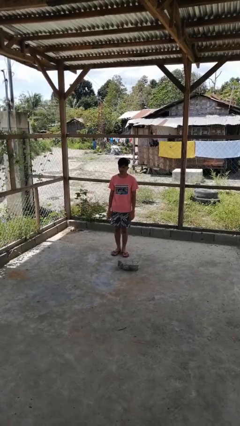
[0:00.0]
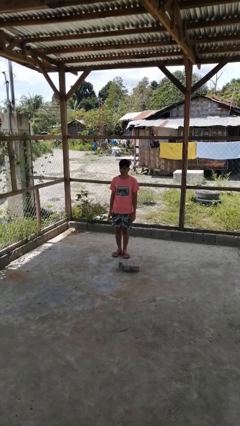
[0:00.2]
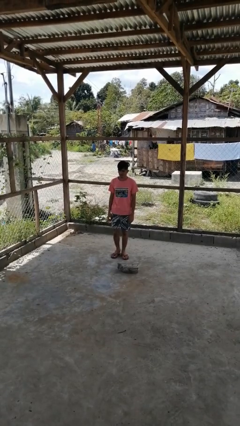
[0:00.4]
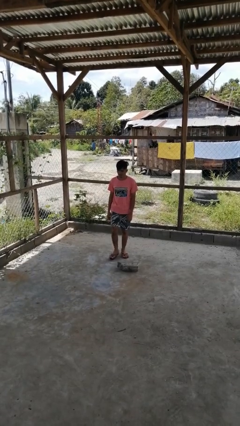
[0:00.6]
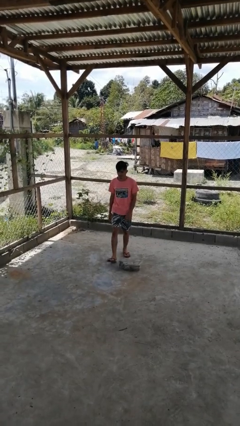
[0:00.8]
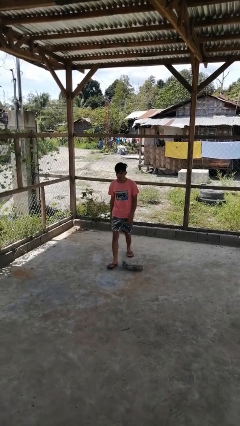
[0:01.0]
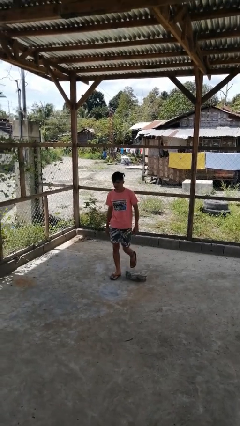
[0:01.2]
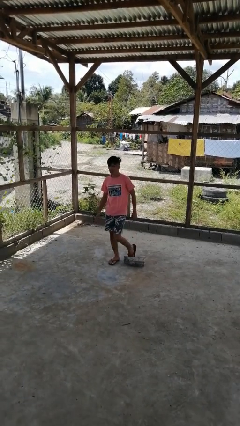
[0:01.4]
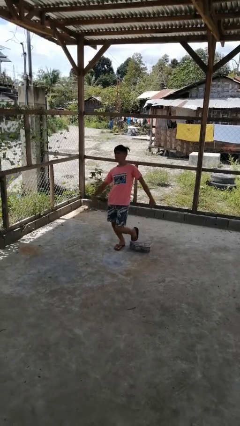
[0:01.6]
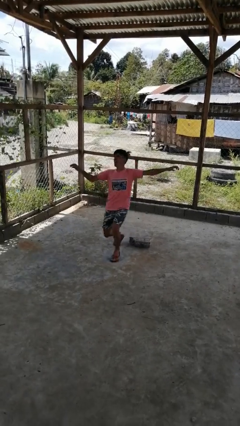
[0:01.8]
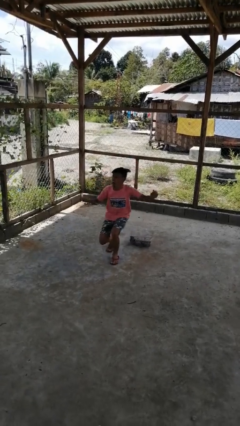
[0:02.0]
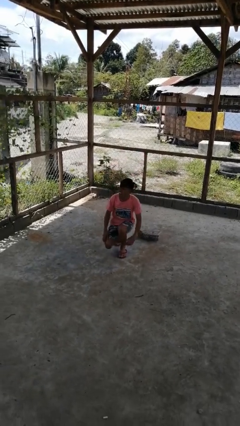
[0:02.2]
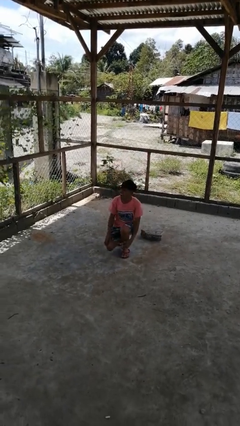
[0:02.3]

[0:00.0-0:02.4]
person trips on object on floor

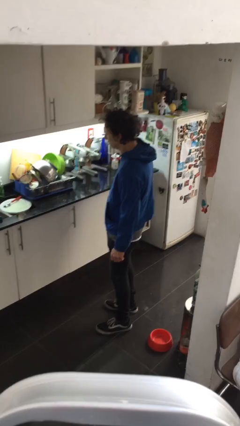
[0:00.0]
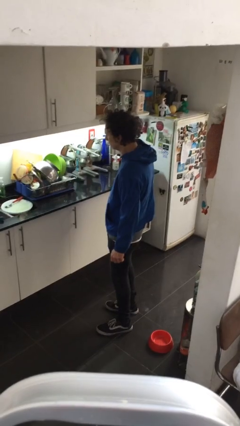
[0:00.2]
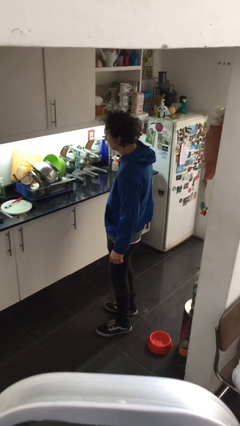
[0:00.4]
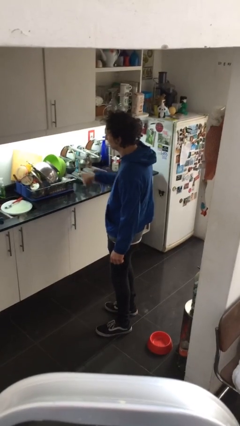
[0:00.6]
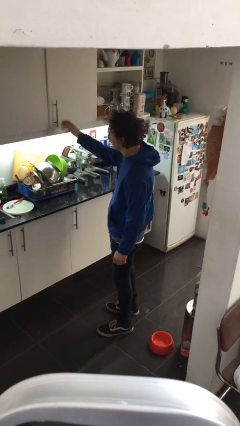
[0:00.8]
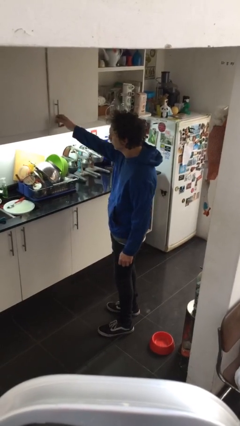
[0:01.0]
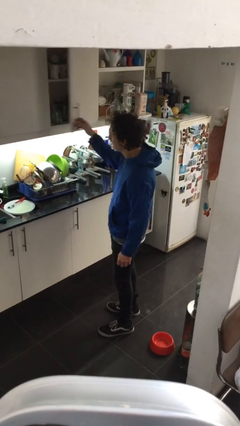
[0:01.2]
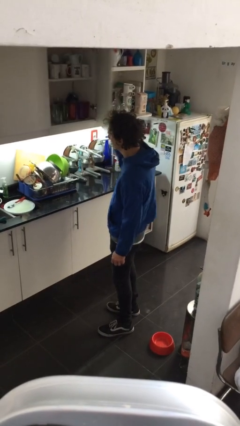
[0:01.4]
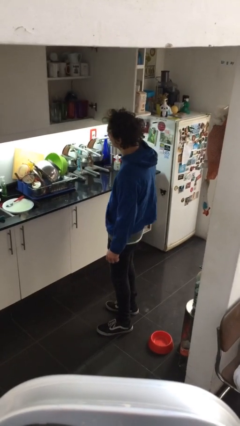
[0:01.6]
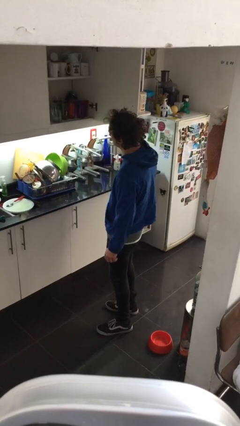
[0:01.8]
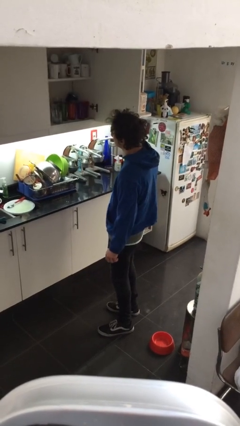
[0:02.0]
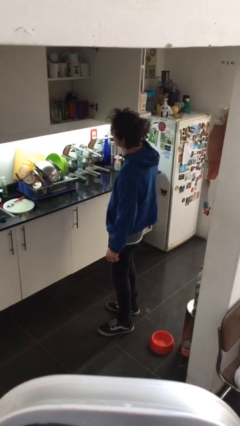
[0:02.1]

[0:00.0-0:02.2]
person opens cabinet

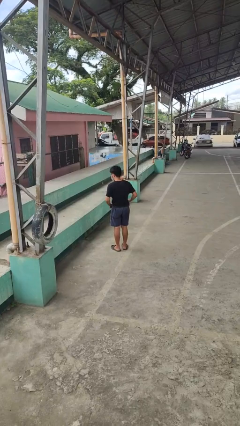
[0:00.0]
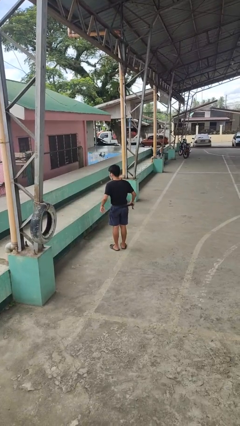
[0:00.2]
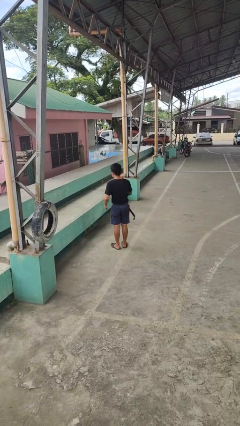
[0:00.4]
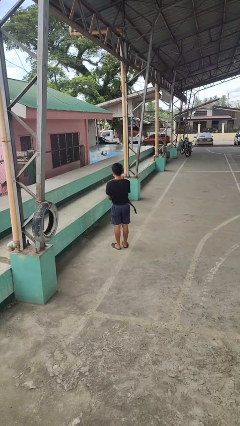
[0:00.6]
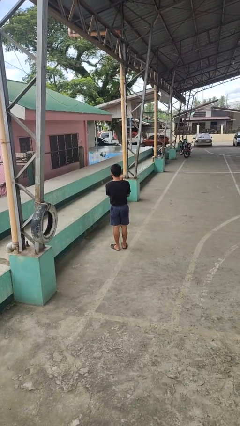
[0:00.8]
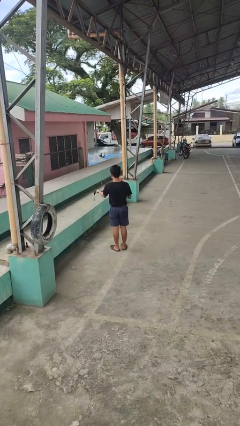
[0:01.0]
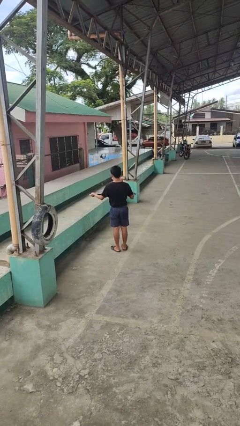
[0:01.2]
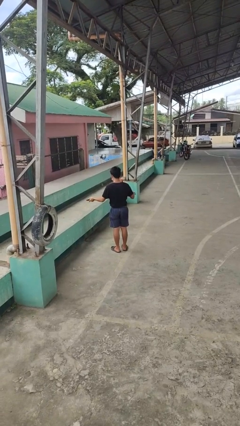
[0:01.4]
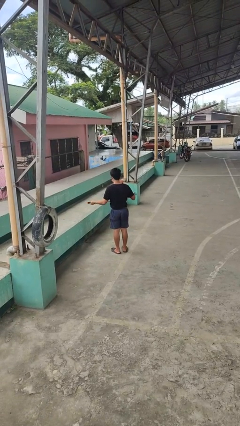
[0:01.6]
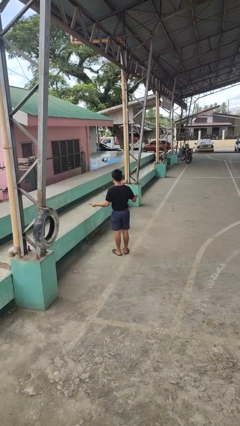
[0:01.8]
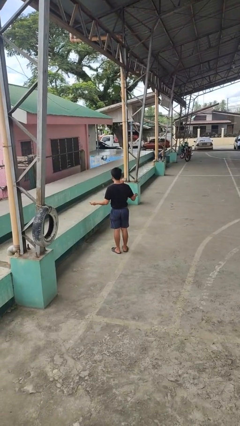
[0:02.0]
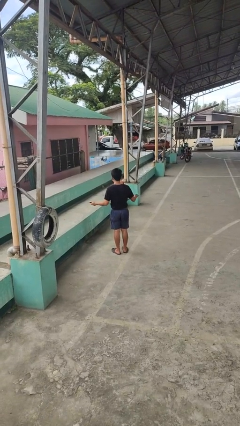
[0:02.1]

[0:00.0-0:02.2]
person takes off belt

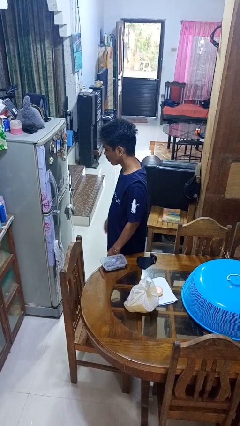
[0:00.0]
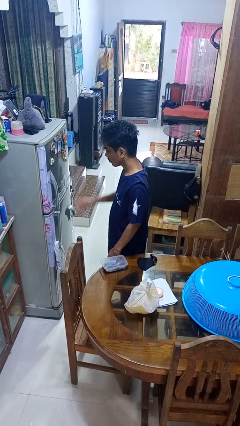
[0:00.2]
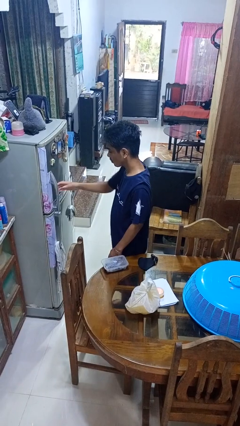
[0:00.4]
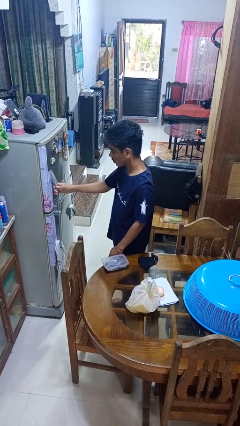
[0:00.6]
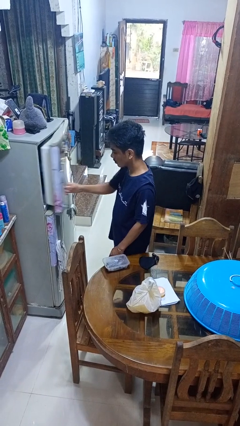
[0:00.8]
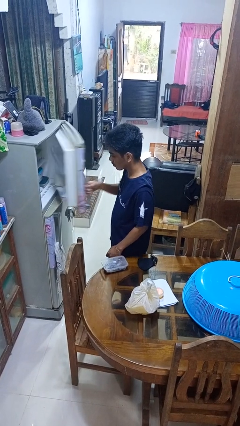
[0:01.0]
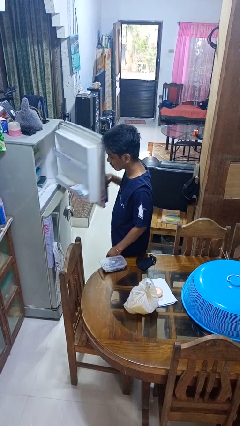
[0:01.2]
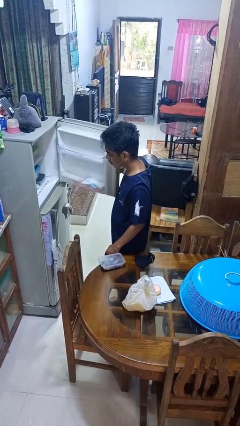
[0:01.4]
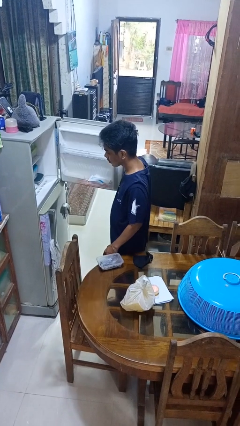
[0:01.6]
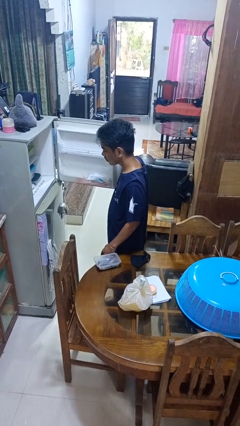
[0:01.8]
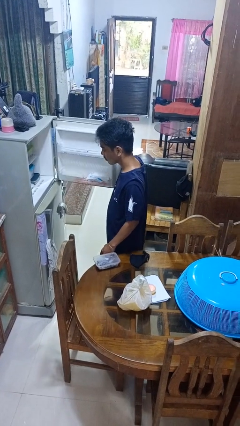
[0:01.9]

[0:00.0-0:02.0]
person opens refrigerator

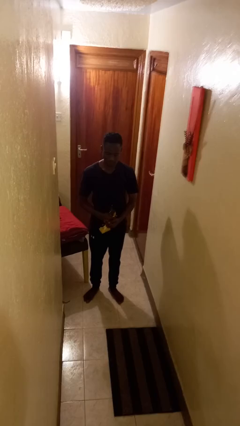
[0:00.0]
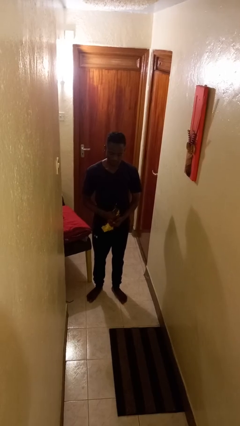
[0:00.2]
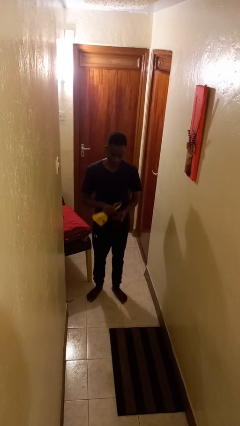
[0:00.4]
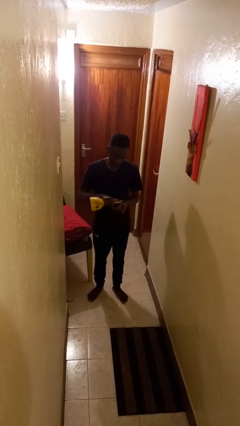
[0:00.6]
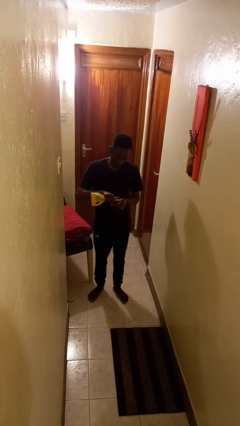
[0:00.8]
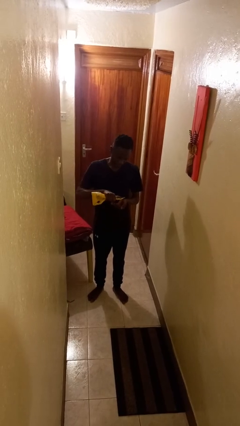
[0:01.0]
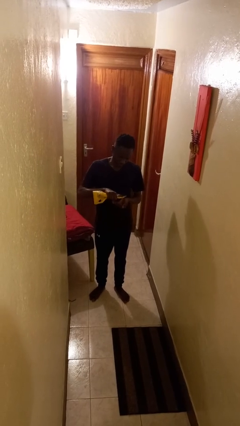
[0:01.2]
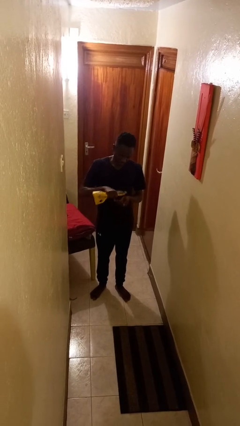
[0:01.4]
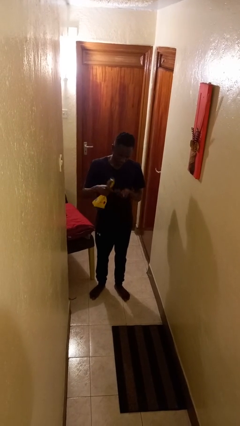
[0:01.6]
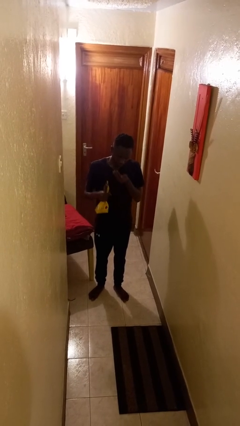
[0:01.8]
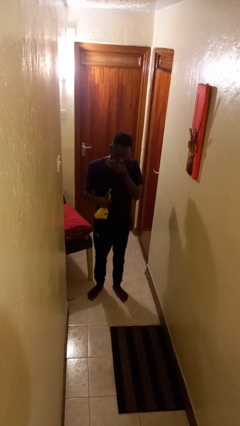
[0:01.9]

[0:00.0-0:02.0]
person eats snack from bag

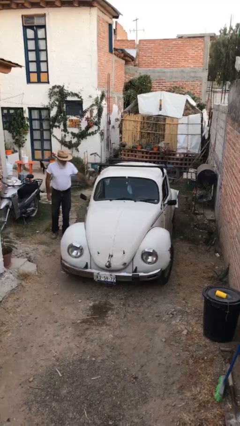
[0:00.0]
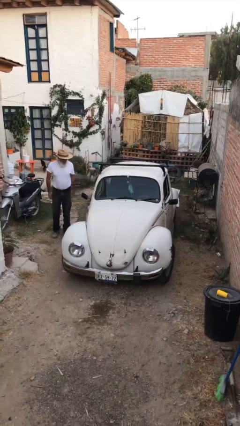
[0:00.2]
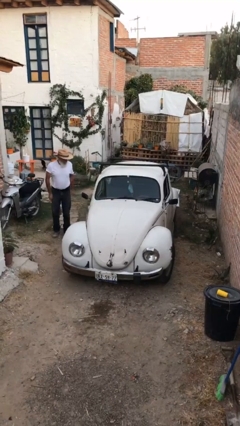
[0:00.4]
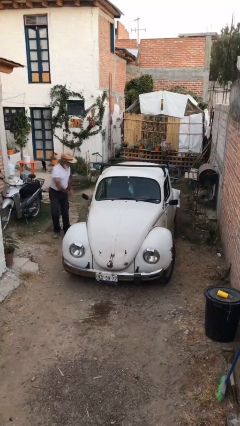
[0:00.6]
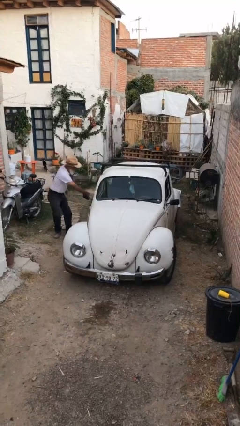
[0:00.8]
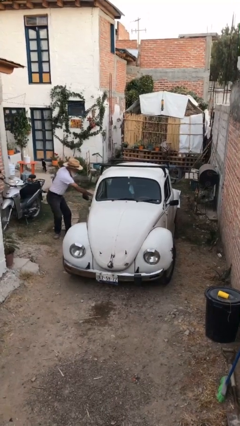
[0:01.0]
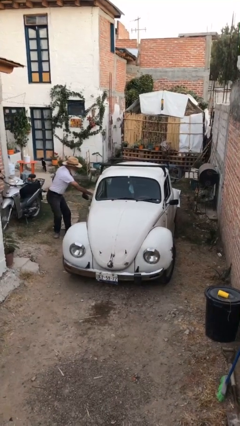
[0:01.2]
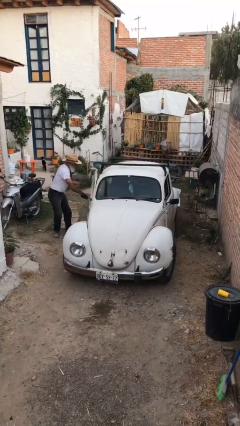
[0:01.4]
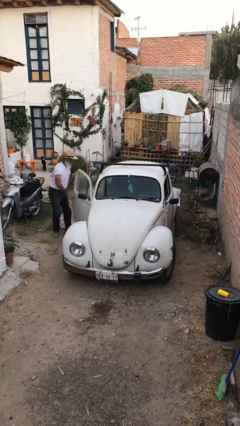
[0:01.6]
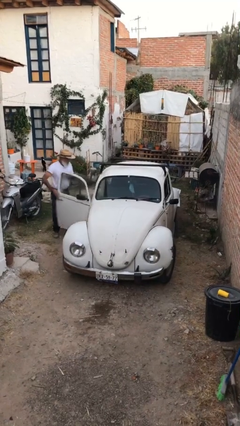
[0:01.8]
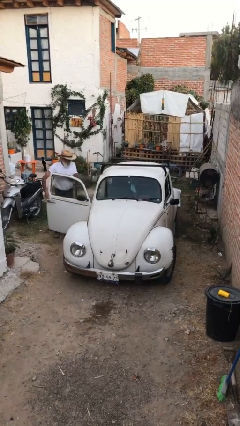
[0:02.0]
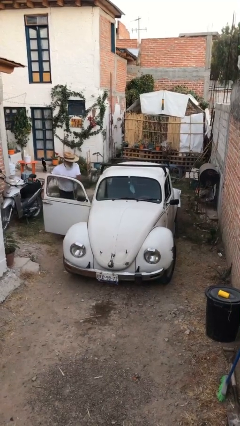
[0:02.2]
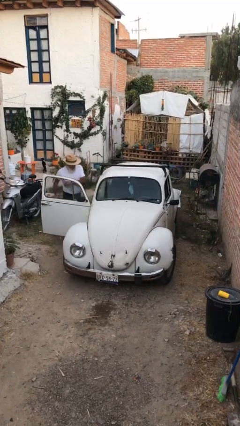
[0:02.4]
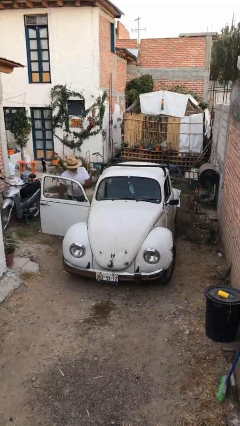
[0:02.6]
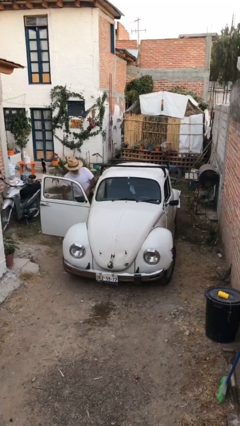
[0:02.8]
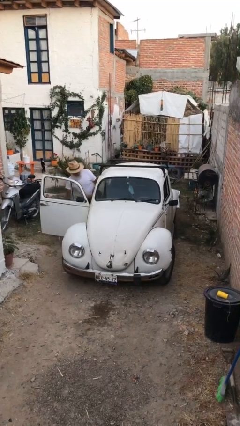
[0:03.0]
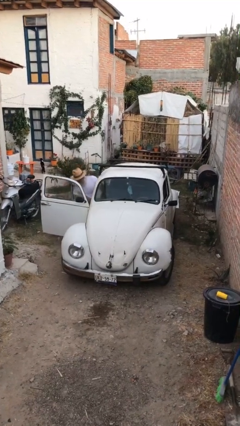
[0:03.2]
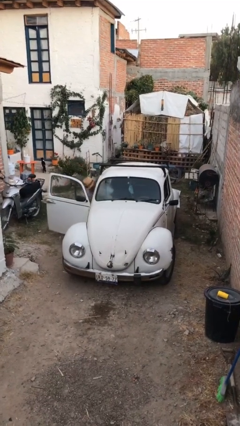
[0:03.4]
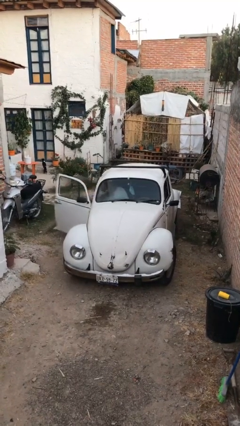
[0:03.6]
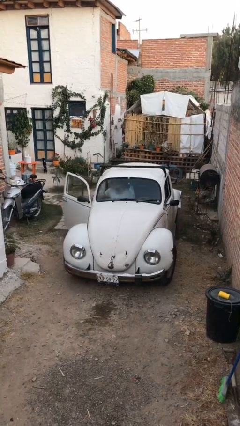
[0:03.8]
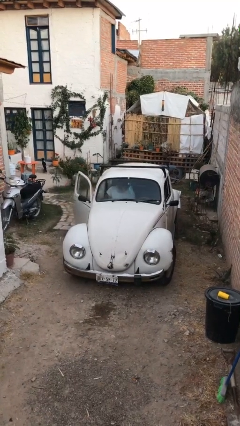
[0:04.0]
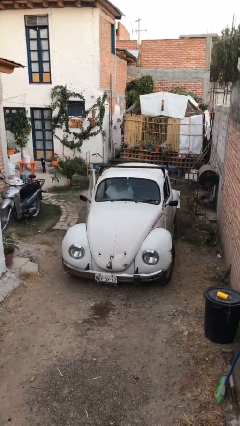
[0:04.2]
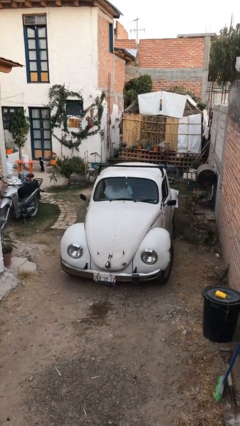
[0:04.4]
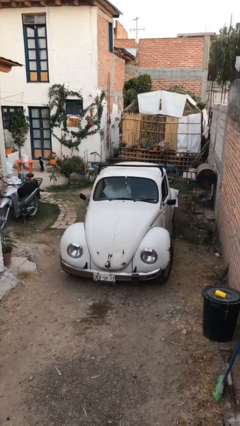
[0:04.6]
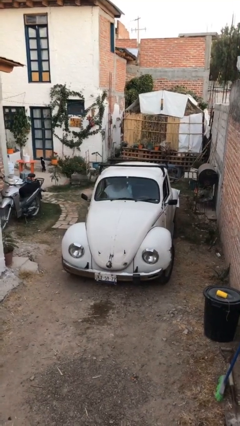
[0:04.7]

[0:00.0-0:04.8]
car picks up person

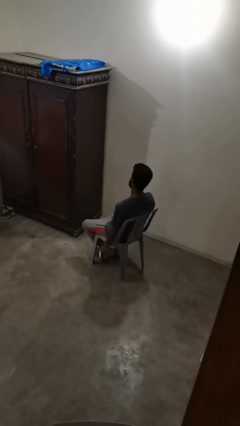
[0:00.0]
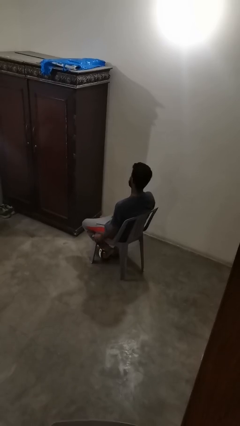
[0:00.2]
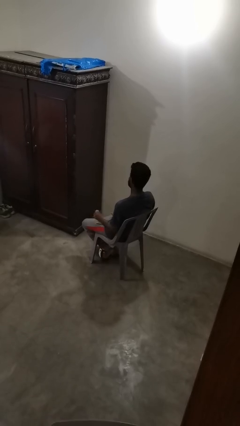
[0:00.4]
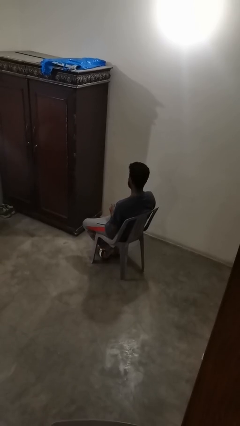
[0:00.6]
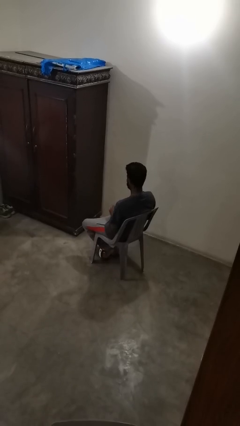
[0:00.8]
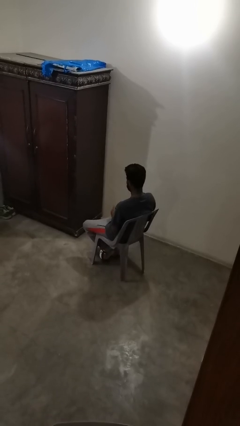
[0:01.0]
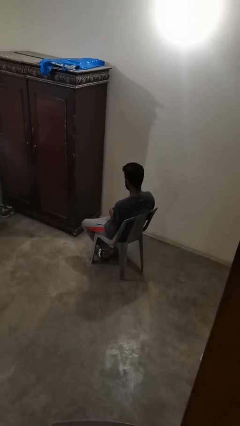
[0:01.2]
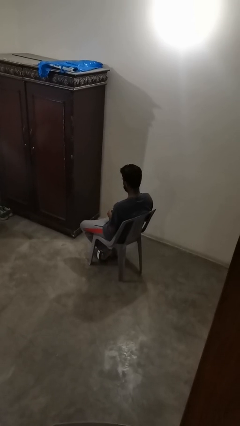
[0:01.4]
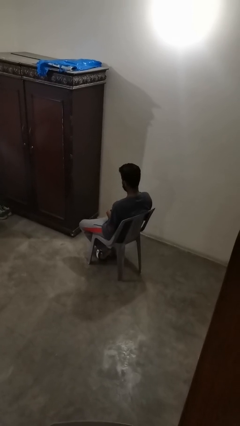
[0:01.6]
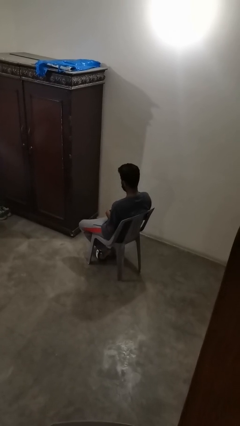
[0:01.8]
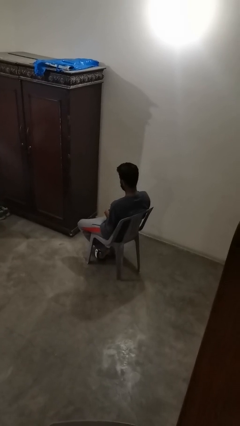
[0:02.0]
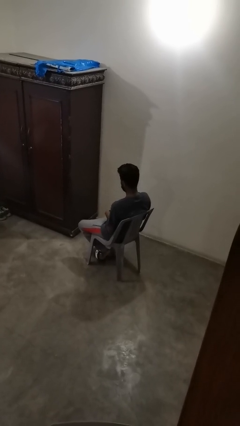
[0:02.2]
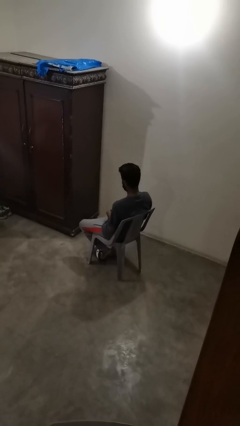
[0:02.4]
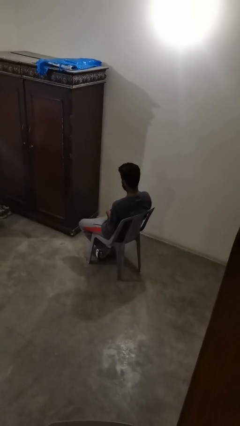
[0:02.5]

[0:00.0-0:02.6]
person clips fingernails
